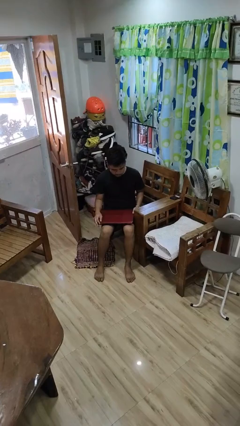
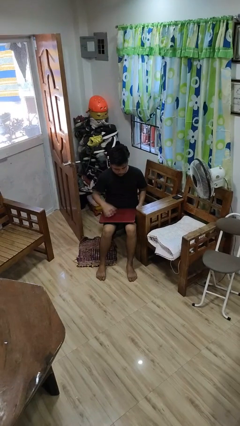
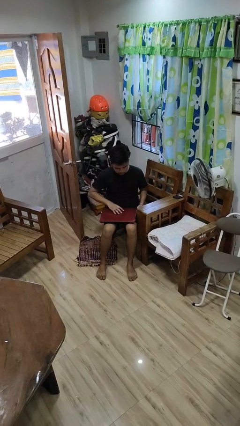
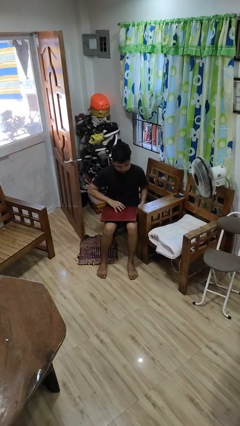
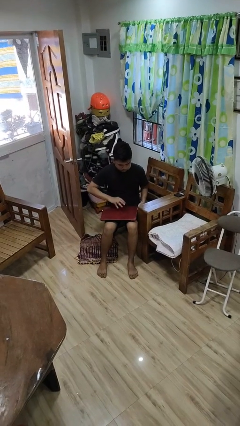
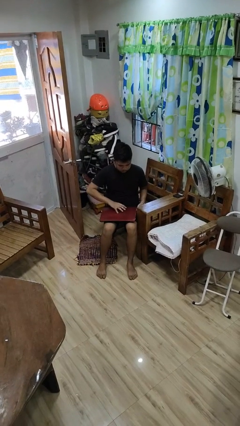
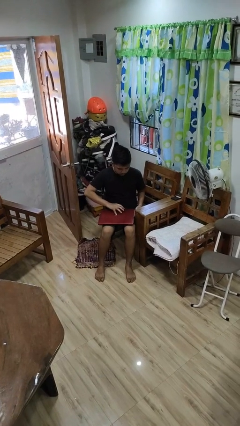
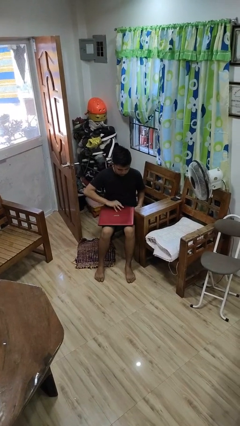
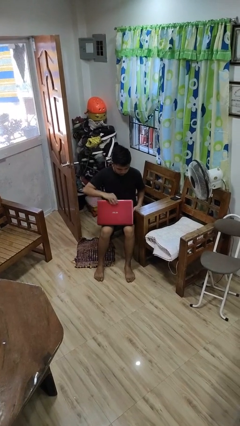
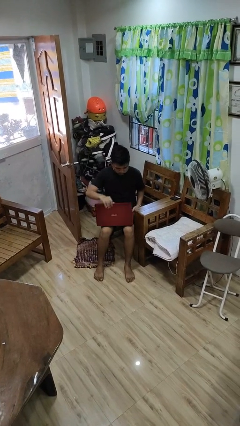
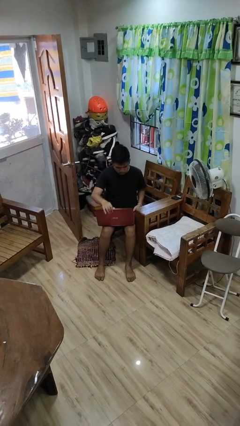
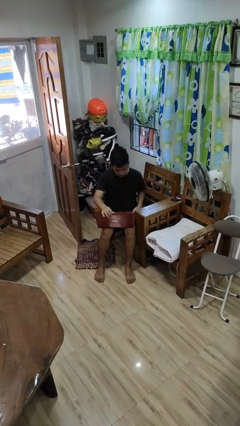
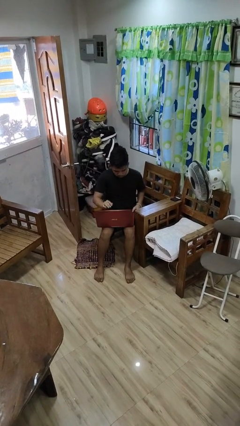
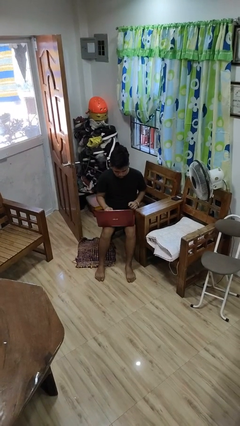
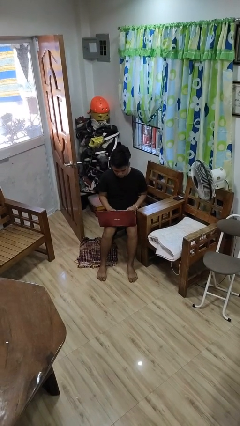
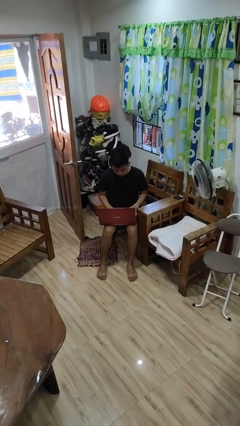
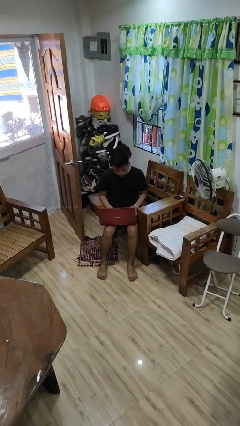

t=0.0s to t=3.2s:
person opens laptop

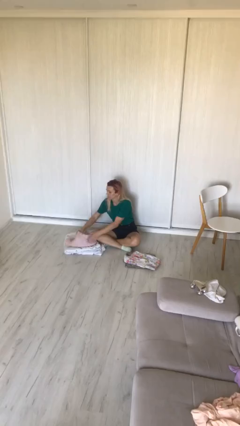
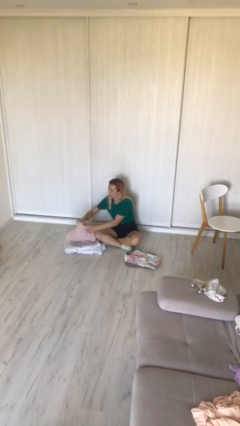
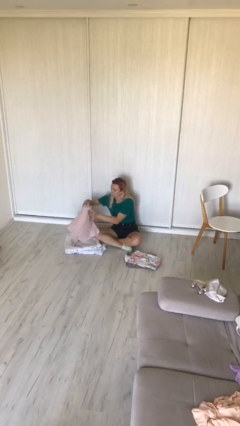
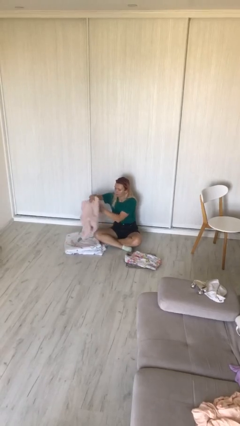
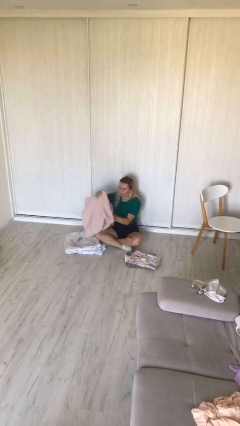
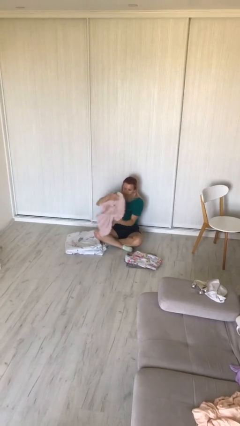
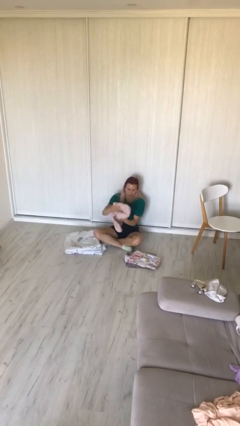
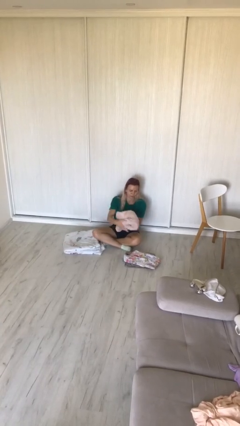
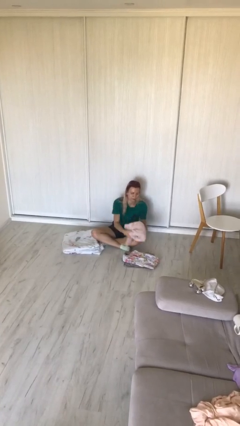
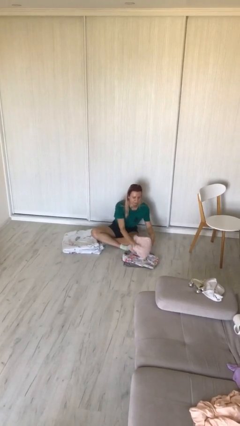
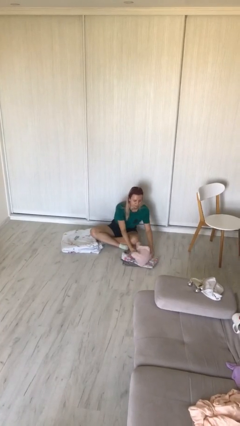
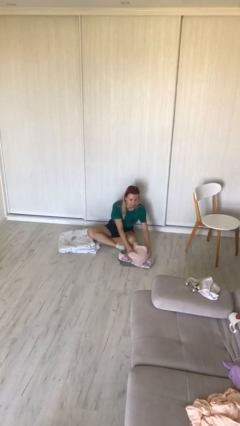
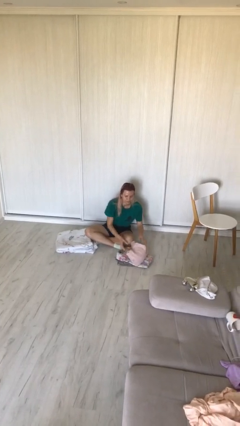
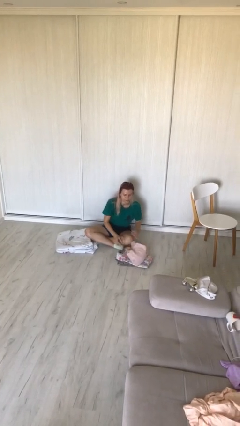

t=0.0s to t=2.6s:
person folds towel

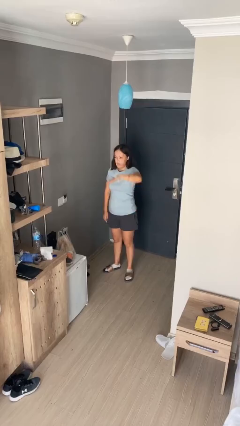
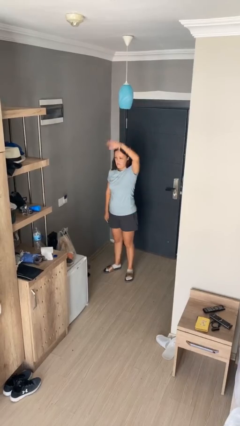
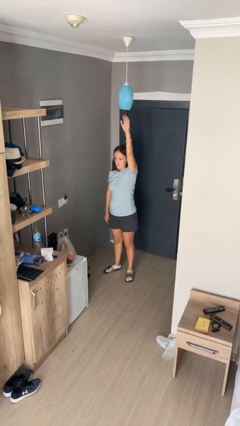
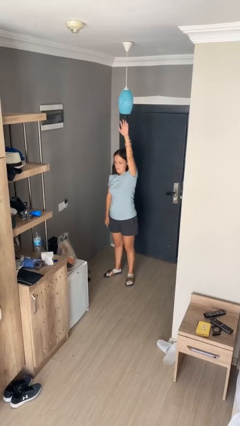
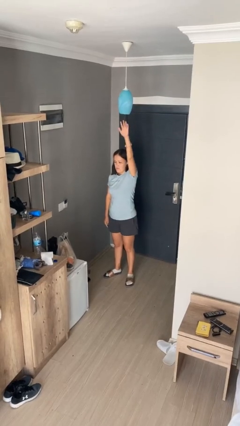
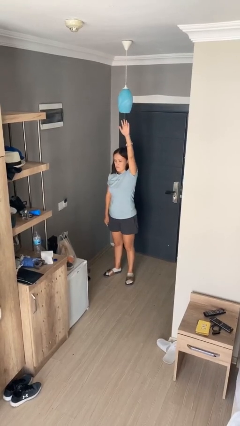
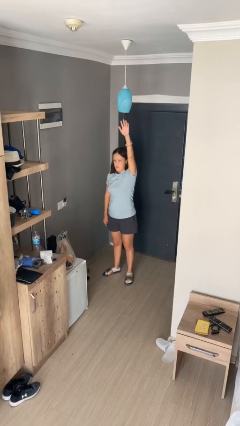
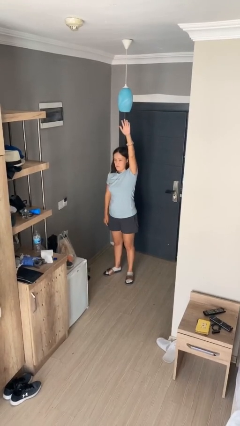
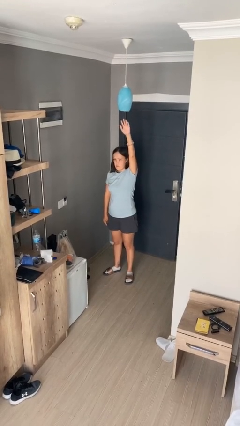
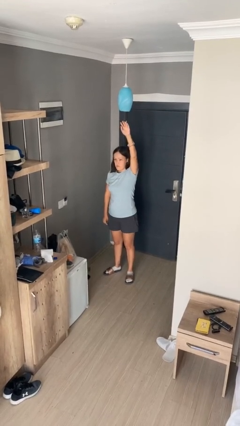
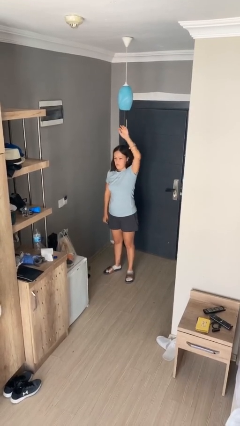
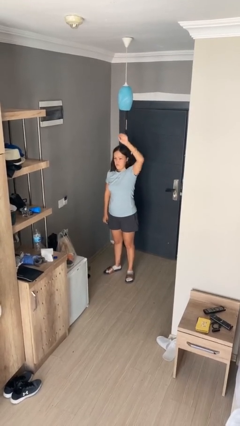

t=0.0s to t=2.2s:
person gestures swipe up

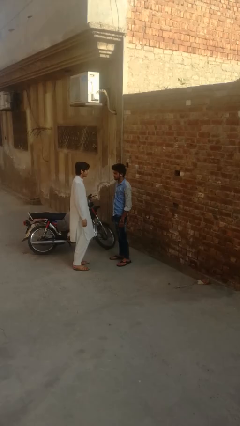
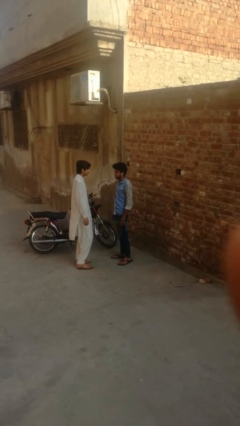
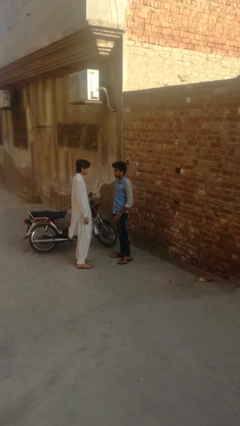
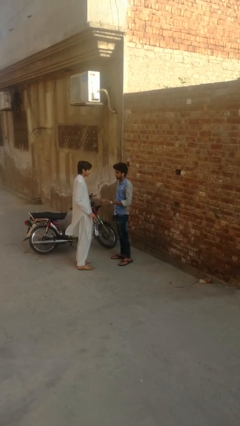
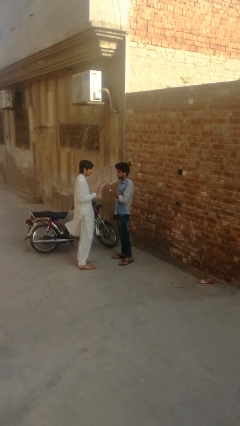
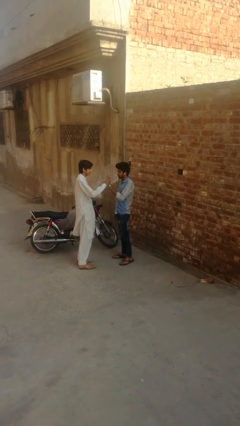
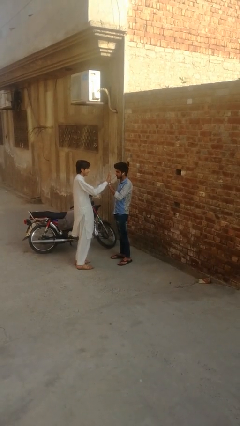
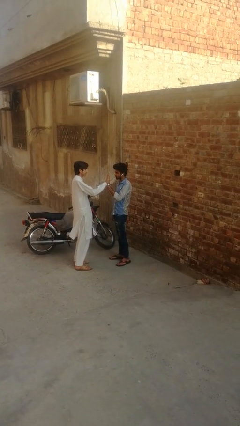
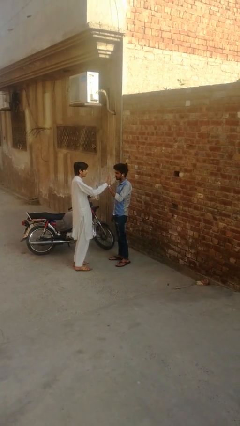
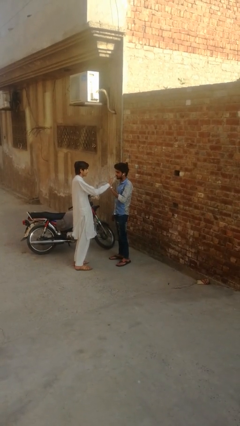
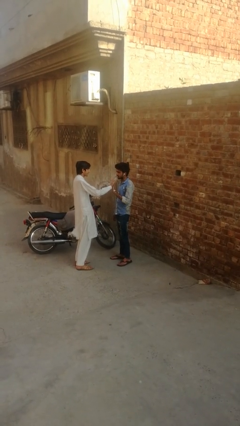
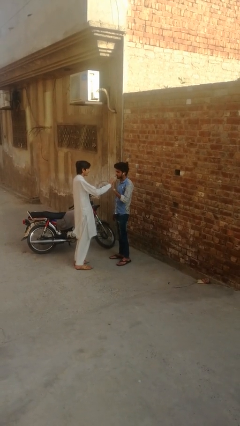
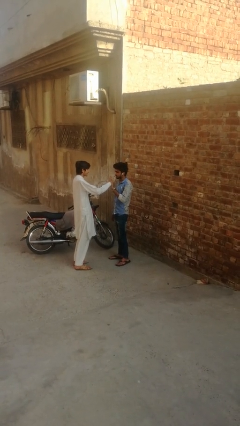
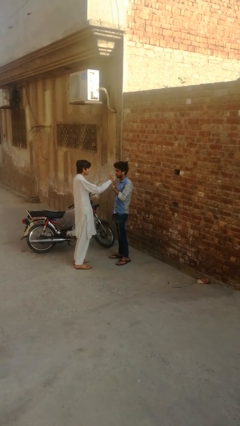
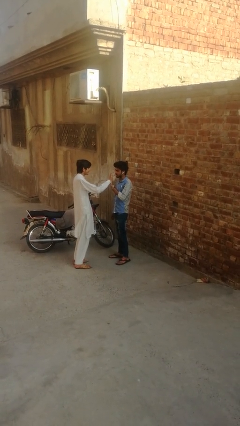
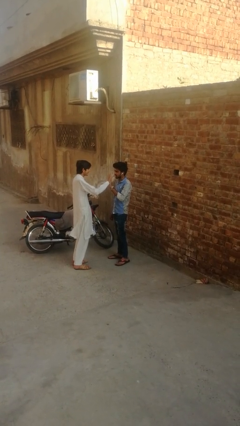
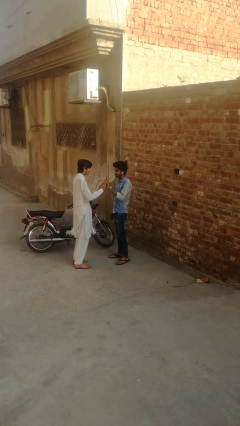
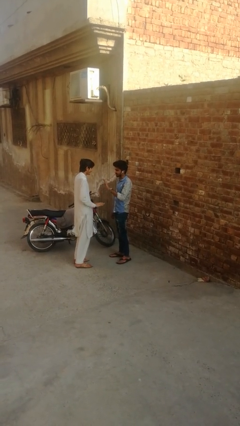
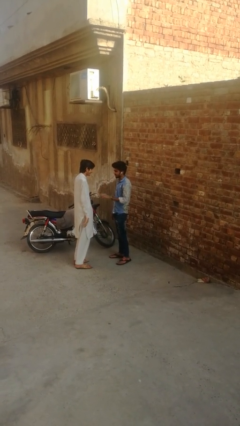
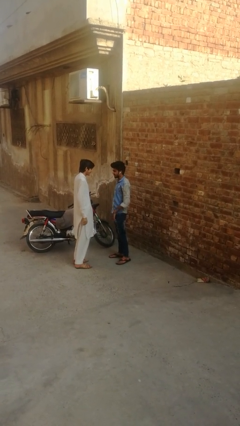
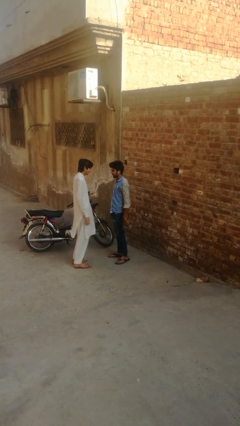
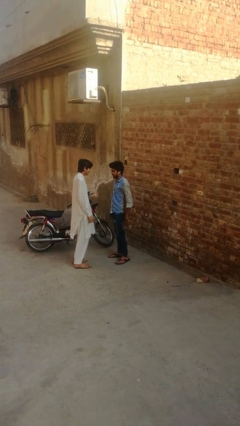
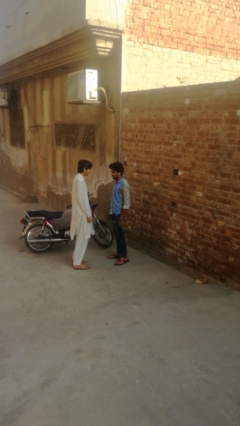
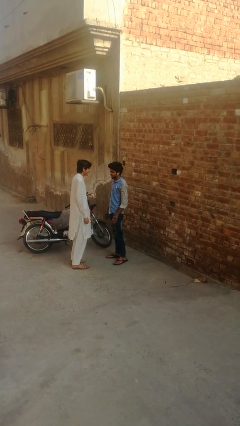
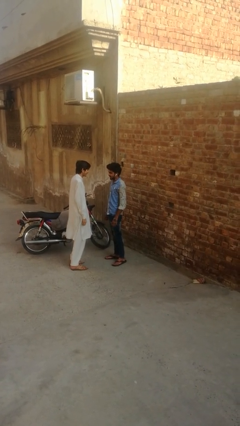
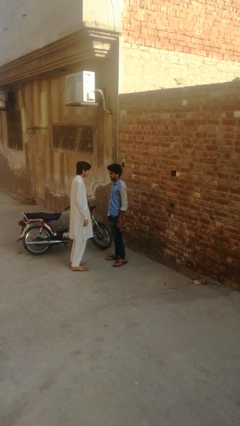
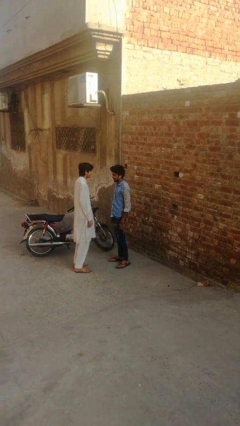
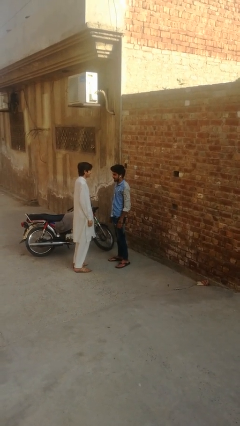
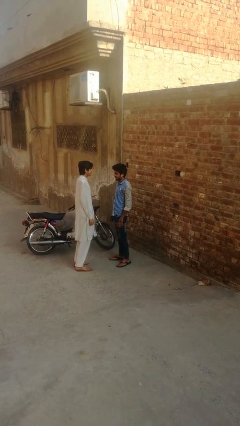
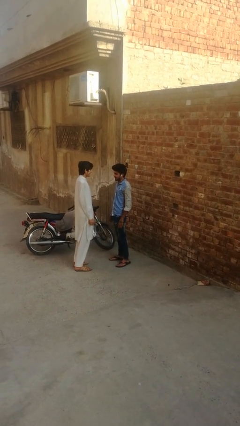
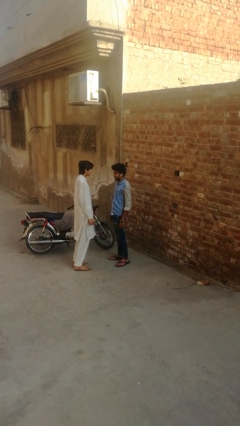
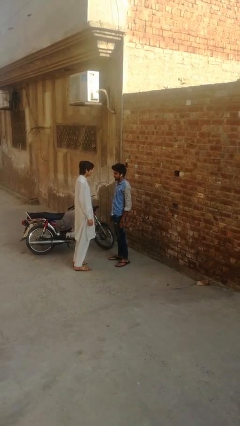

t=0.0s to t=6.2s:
person highfives hand

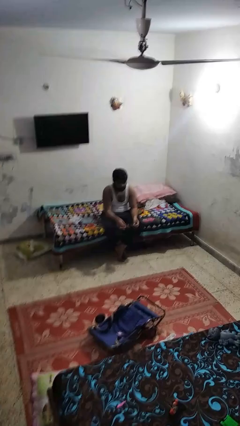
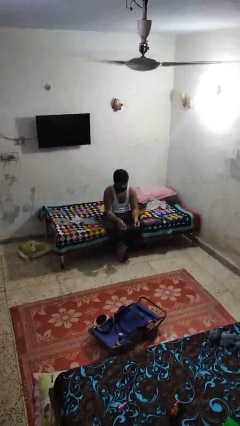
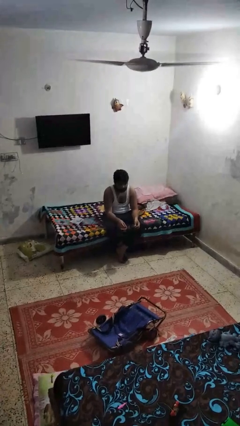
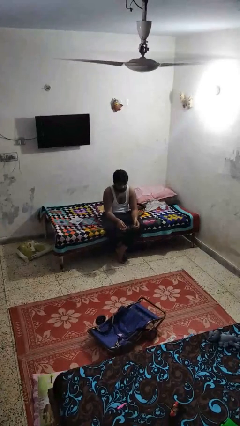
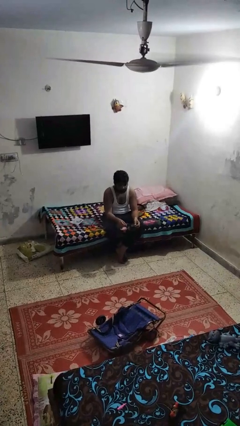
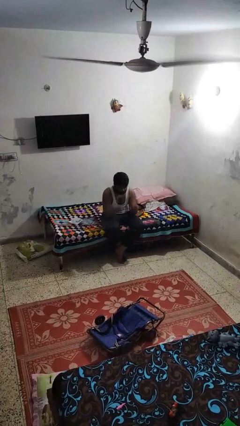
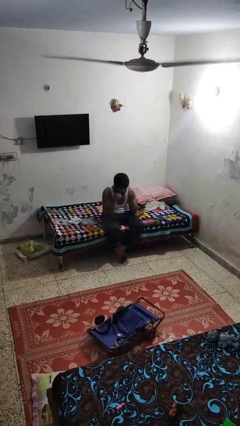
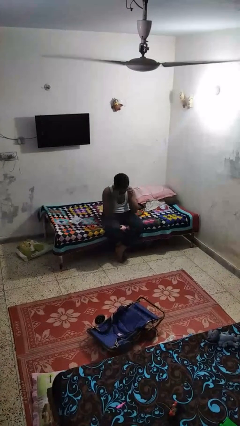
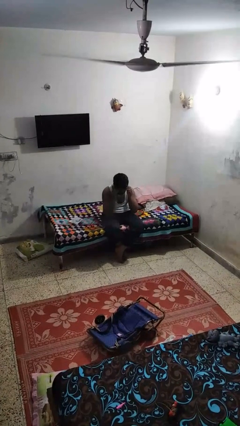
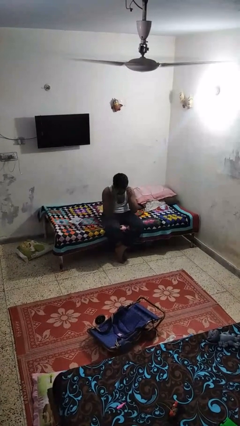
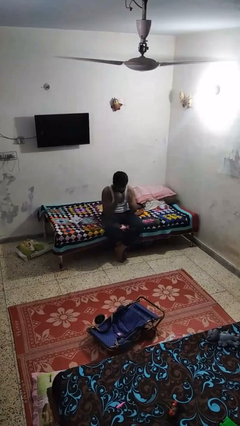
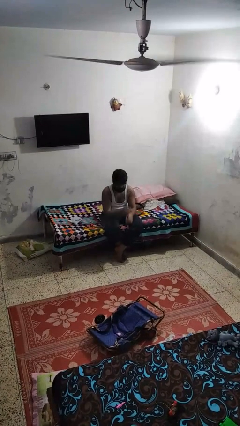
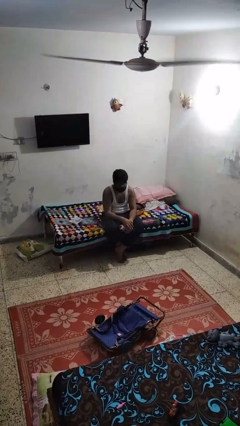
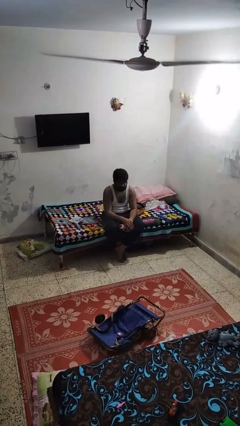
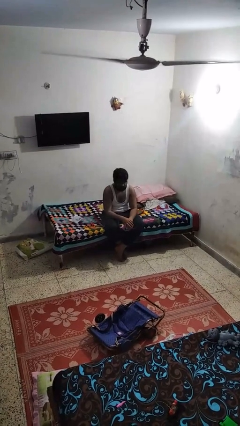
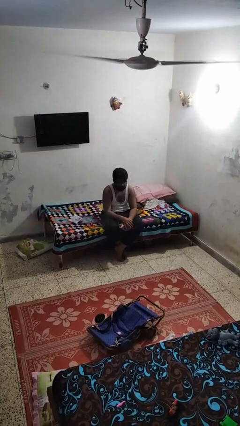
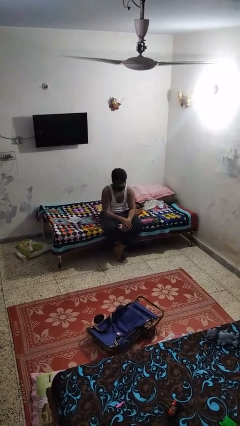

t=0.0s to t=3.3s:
person puts on glasses

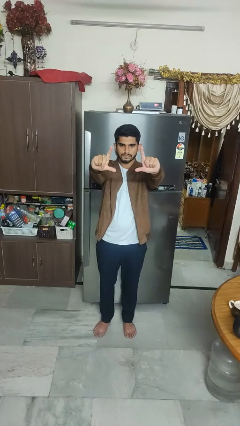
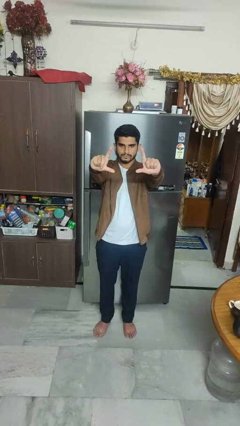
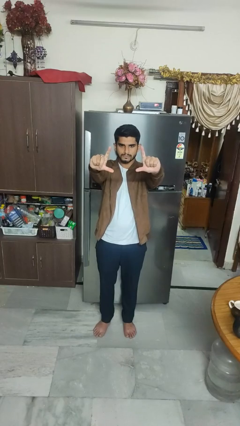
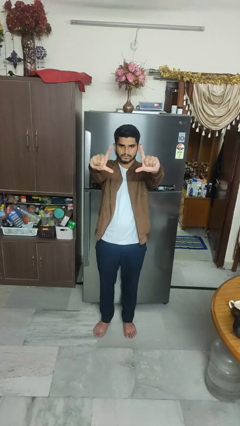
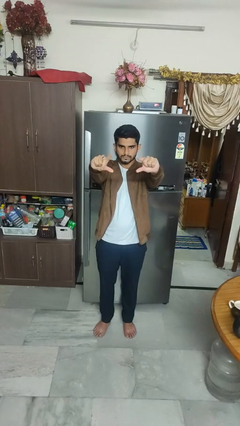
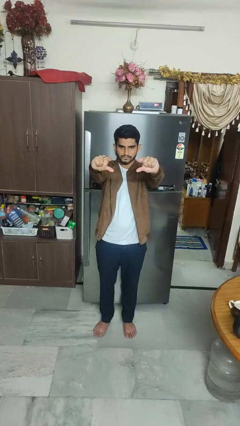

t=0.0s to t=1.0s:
person gestures zoom in
